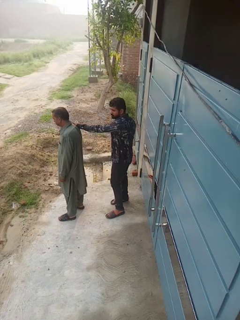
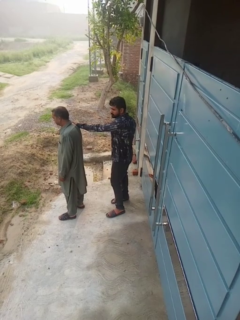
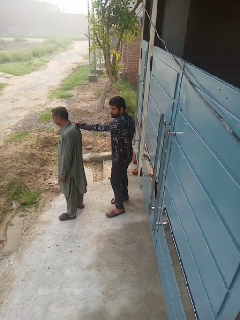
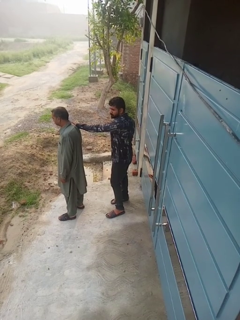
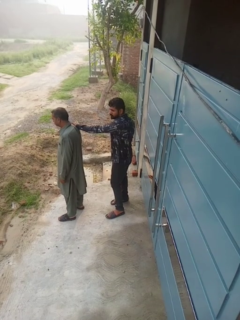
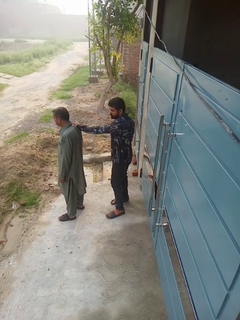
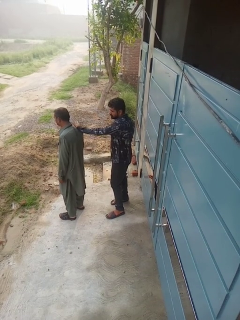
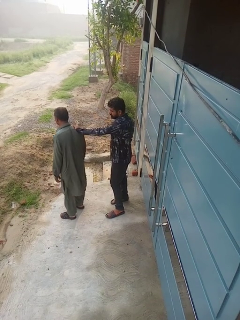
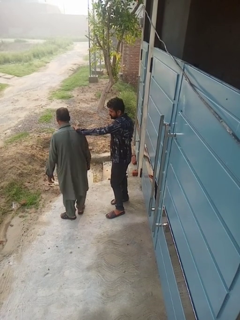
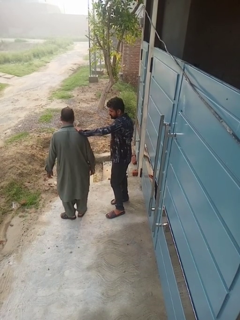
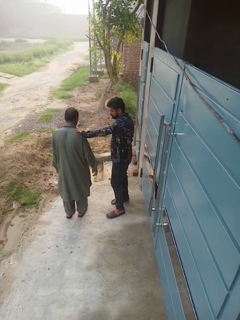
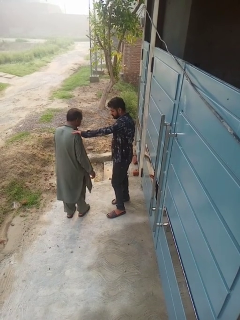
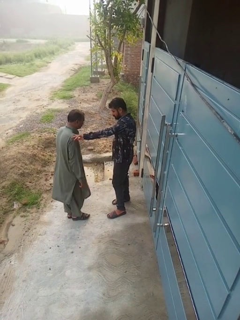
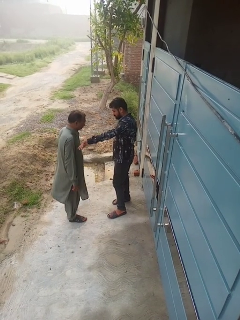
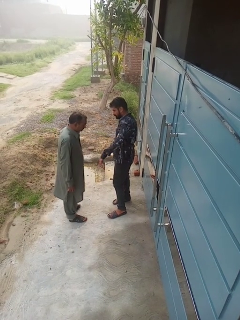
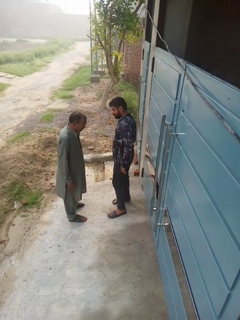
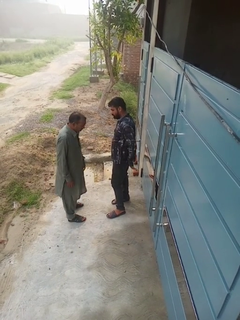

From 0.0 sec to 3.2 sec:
person spins person around

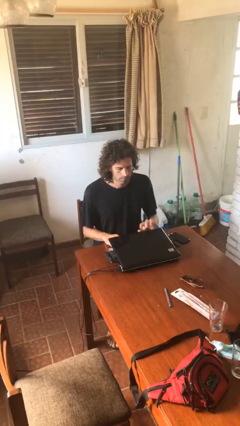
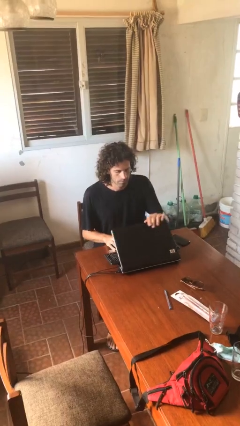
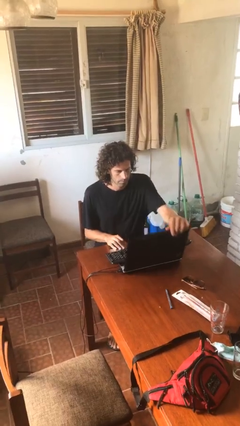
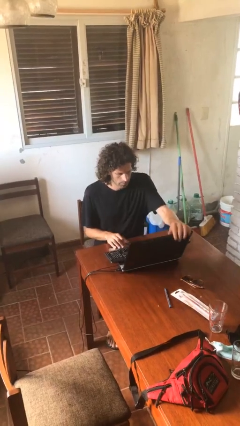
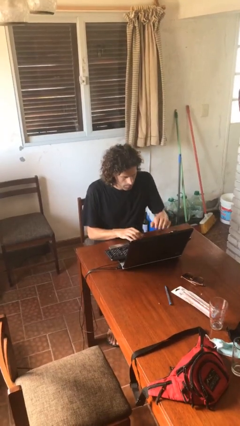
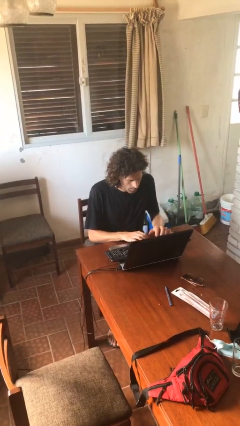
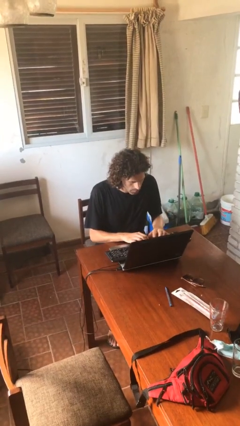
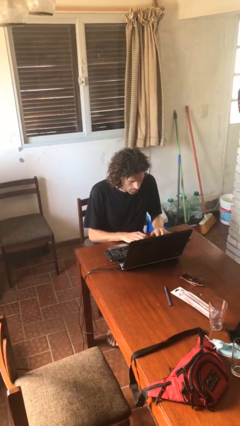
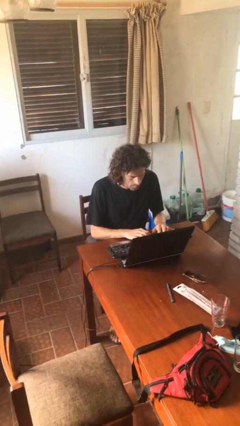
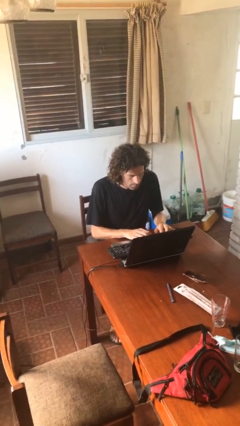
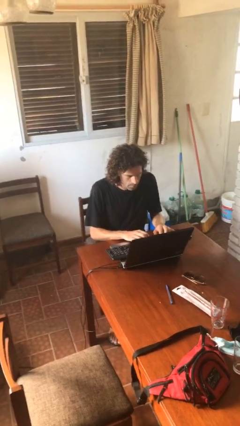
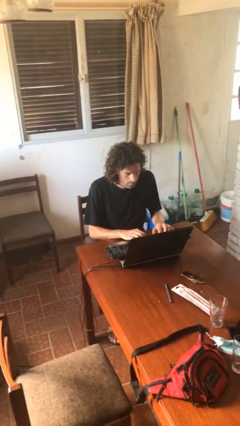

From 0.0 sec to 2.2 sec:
person interacts with laptop

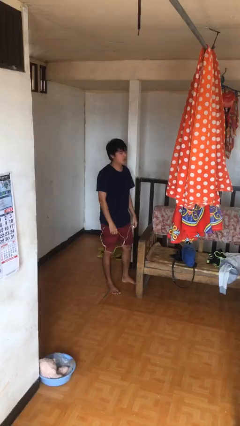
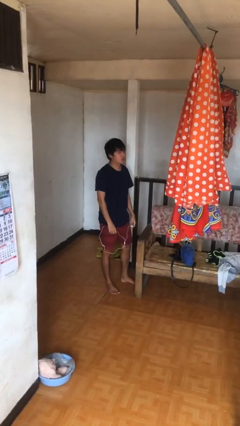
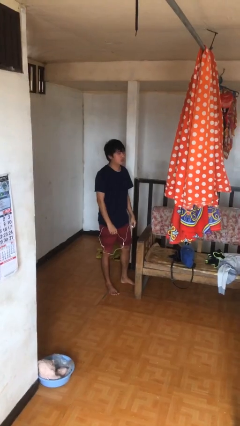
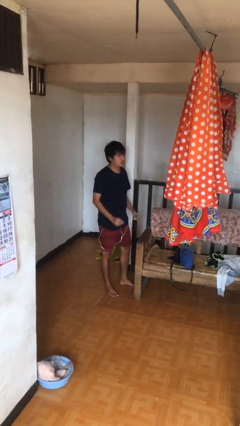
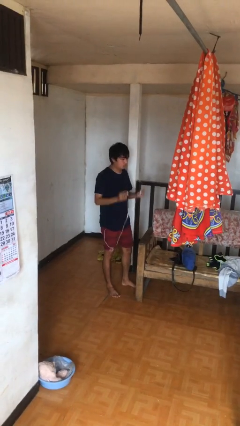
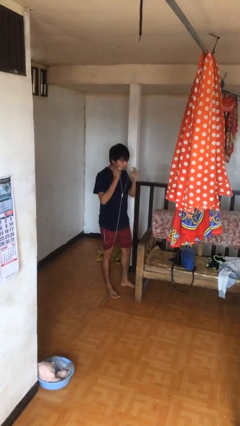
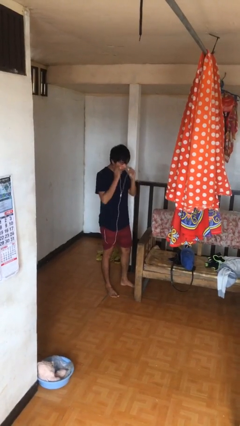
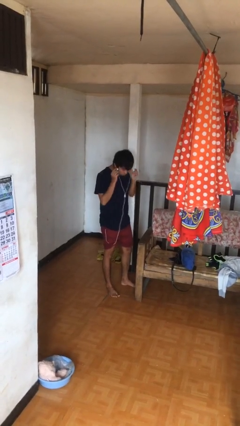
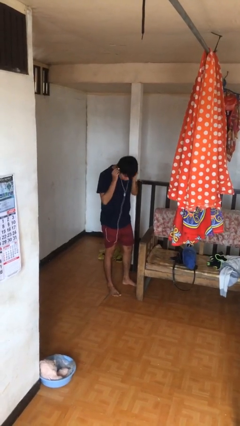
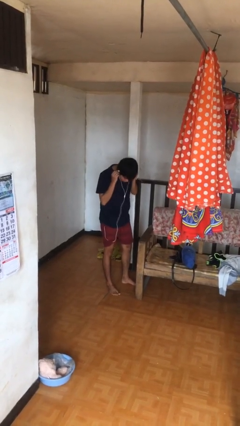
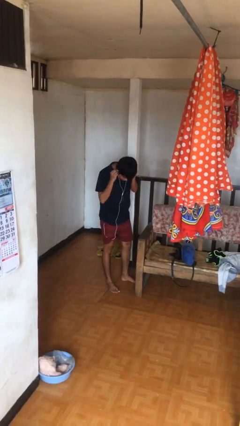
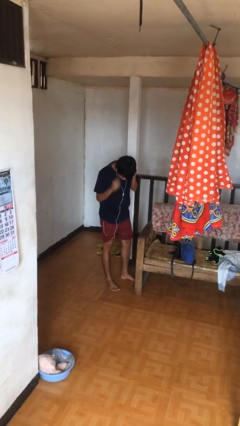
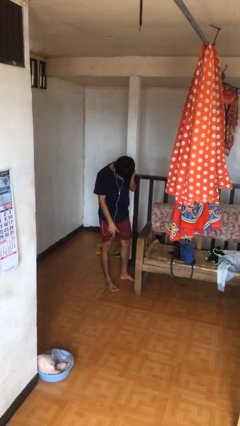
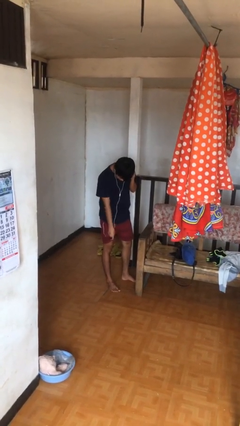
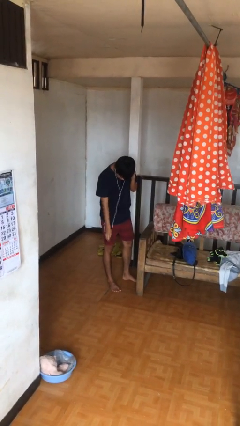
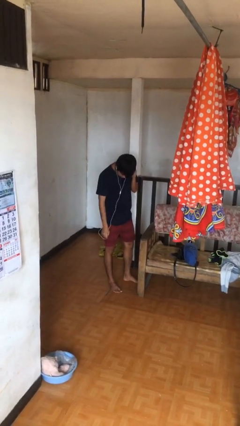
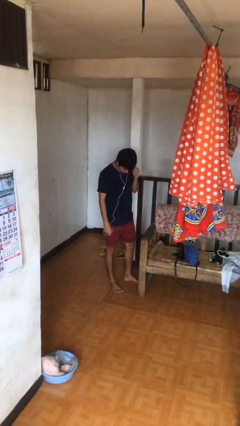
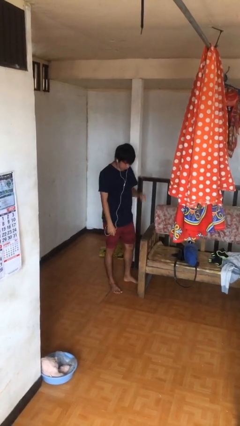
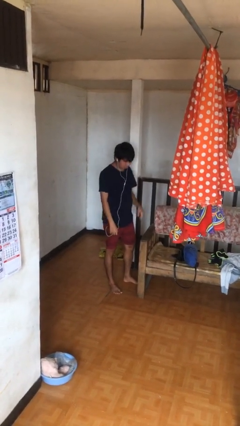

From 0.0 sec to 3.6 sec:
person puts on headphones

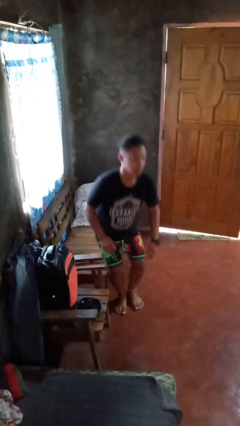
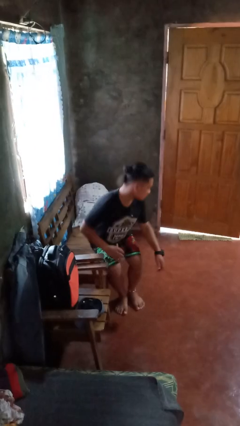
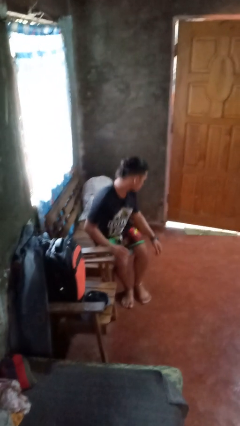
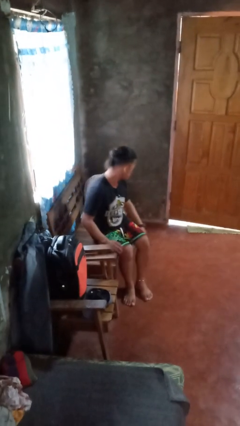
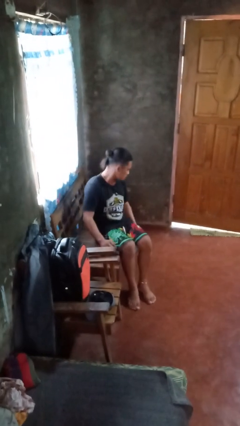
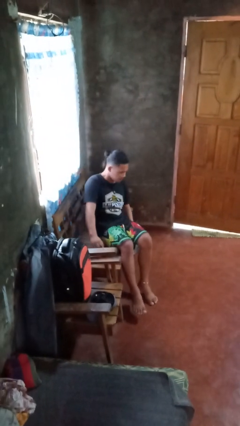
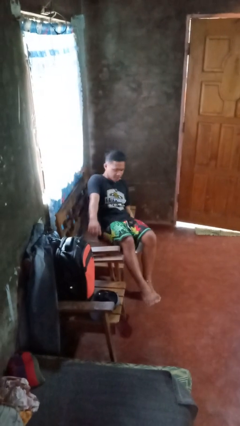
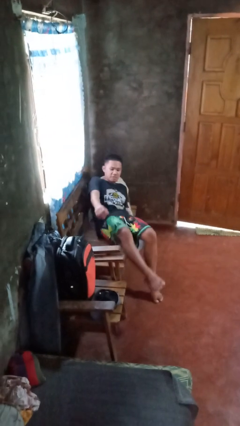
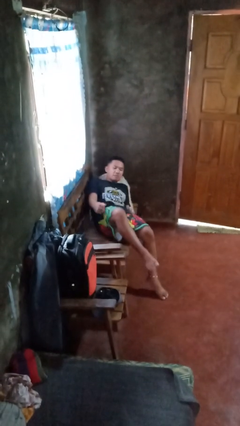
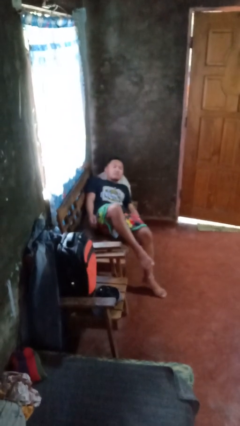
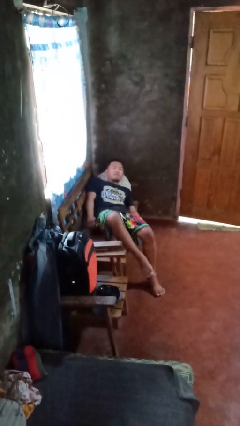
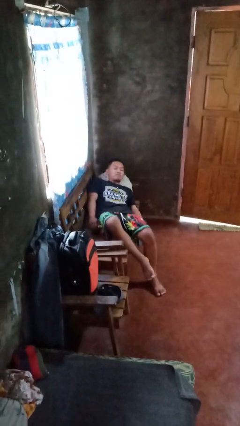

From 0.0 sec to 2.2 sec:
person lies down on couch

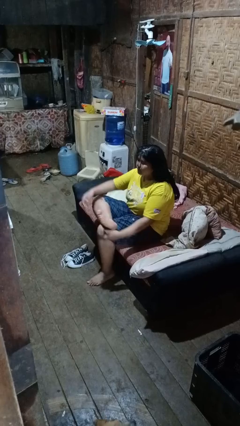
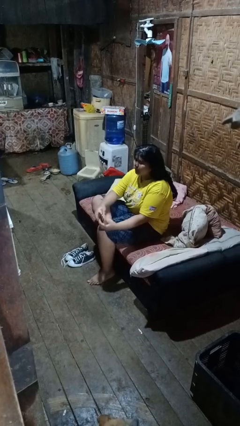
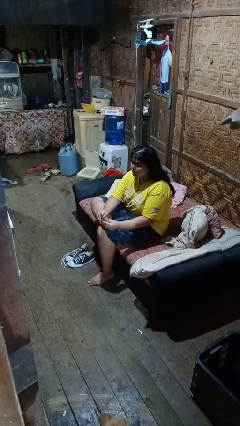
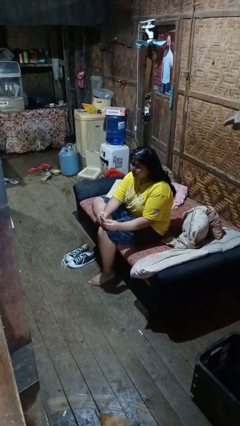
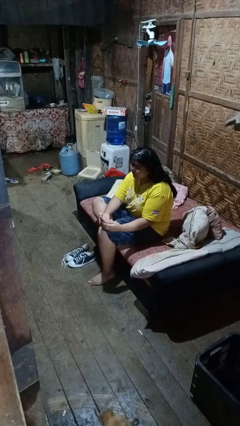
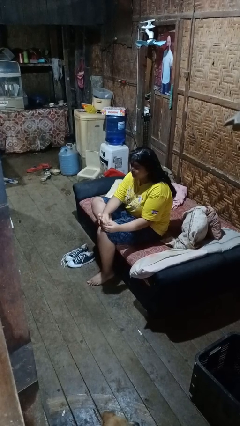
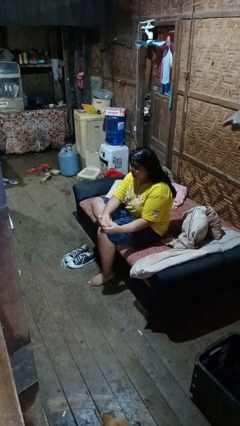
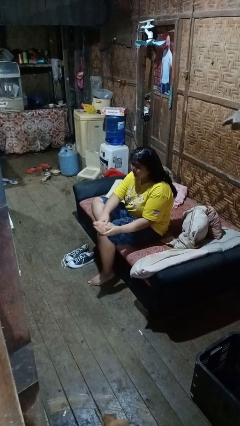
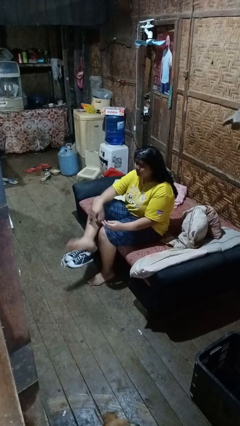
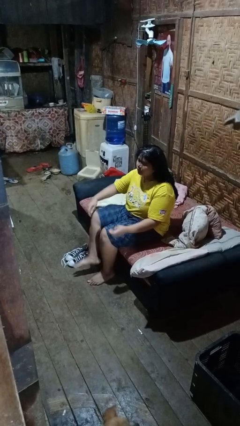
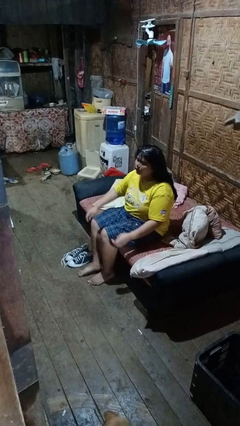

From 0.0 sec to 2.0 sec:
person rubs foot

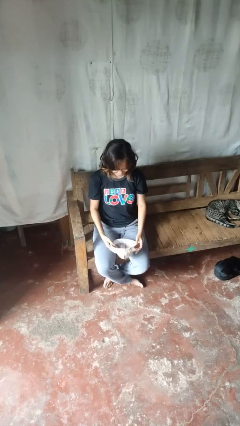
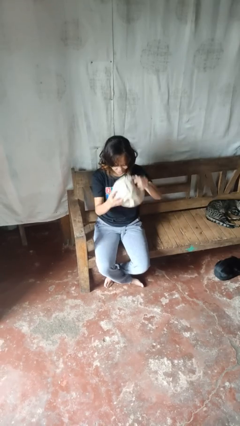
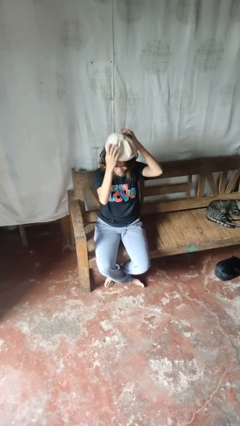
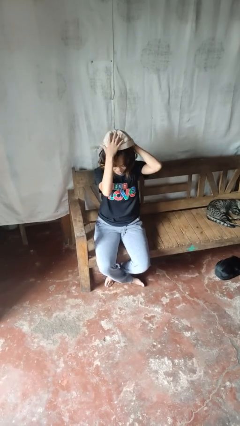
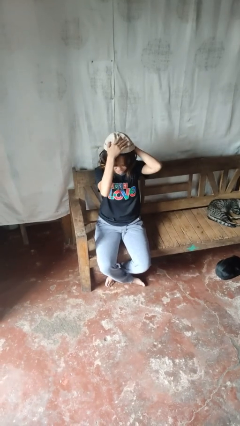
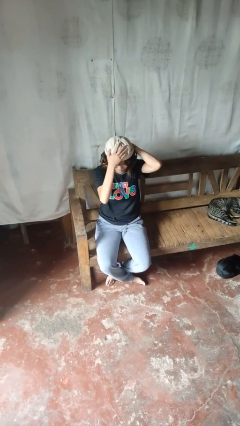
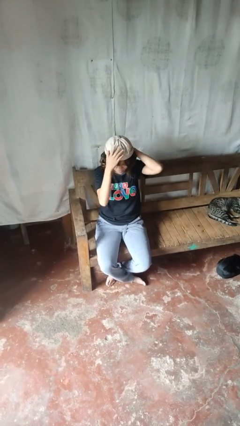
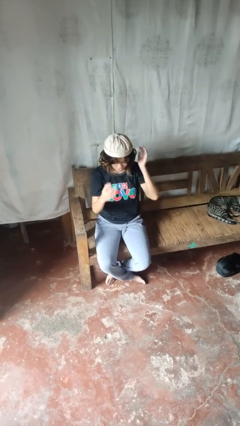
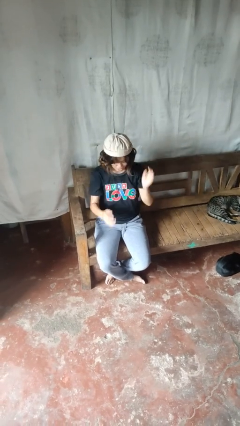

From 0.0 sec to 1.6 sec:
person puts on hat

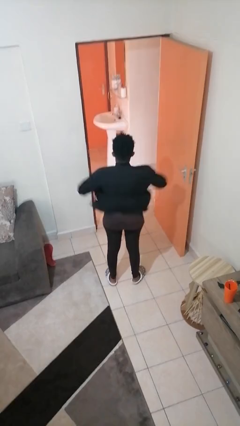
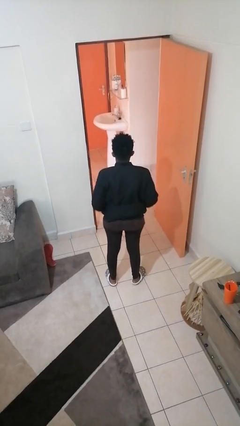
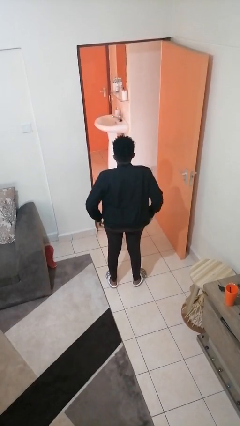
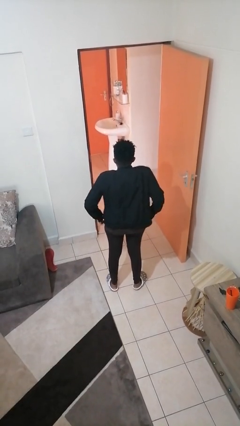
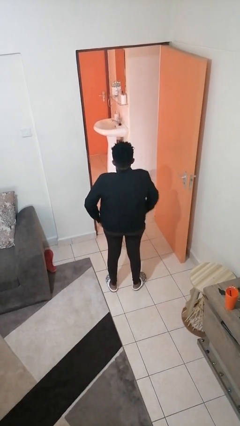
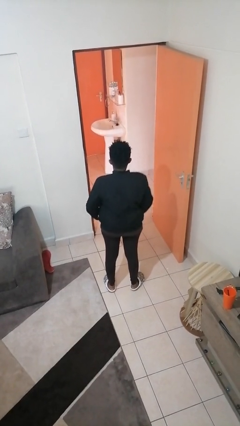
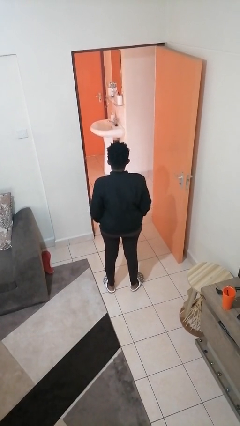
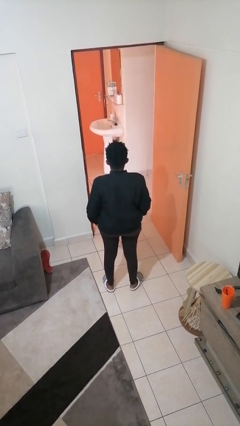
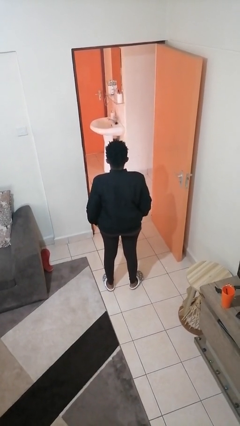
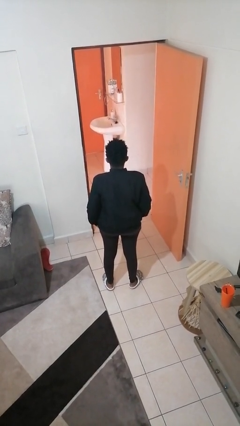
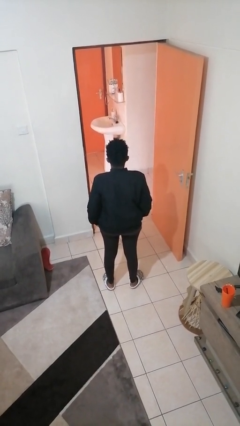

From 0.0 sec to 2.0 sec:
person puts on jacket

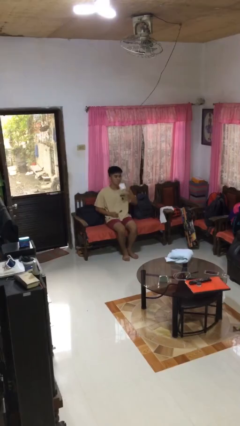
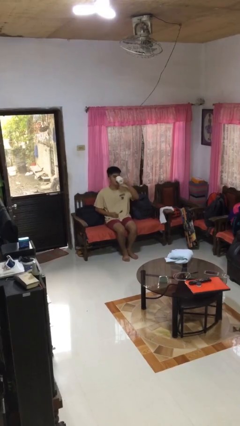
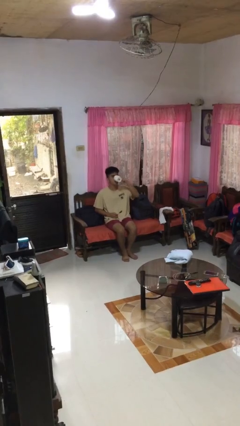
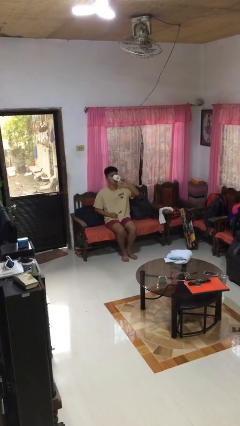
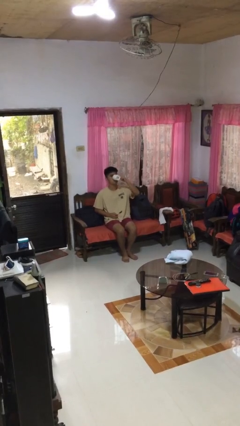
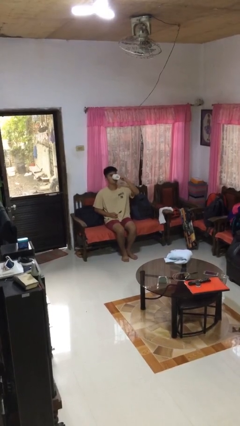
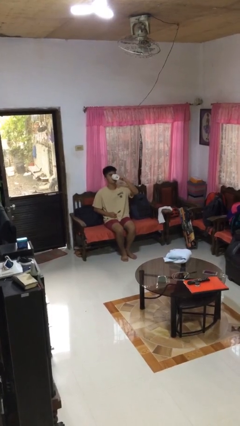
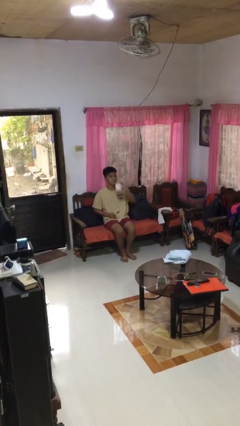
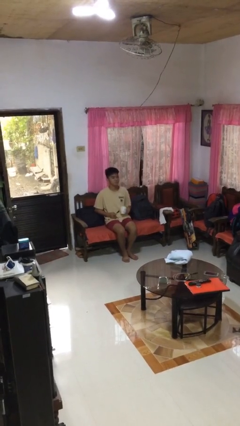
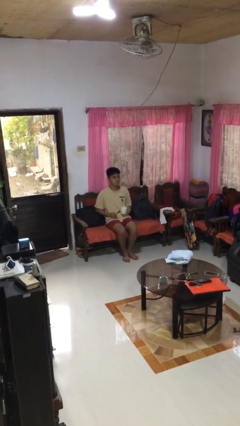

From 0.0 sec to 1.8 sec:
person drinks from mug
